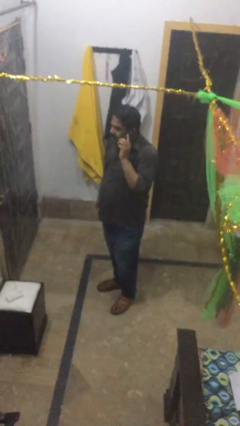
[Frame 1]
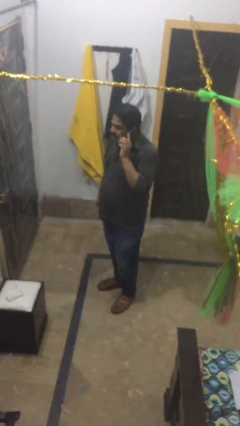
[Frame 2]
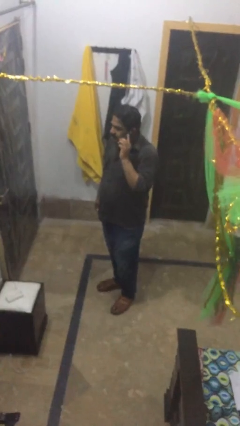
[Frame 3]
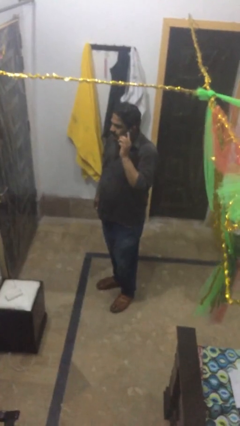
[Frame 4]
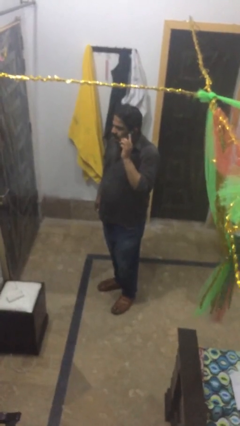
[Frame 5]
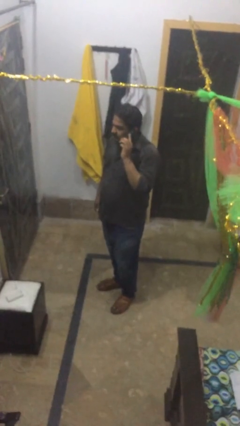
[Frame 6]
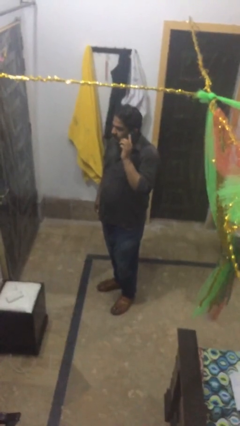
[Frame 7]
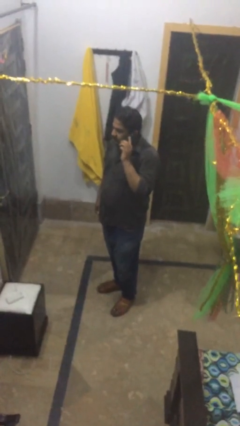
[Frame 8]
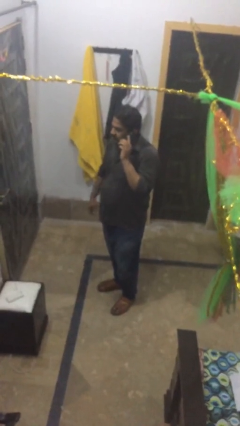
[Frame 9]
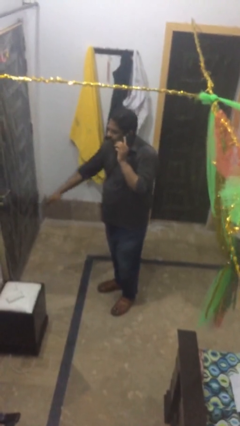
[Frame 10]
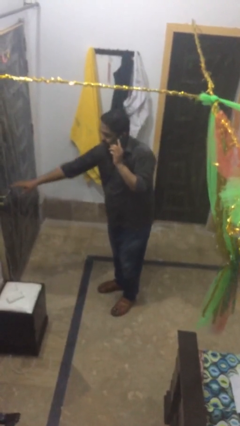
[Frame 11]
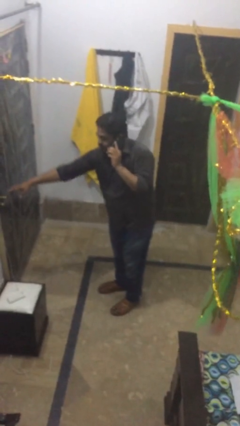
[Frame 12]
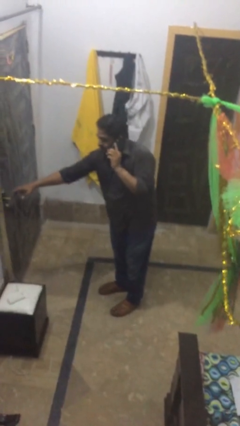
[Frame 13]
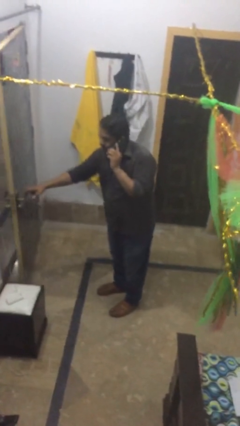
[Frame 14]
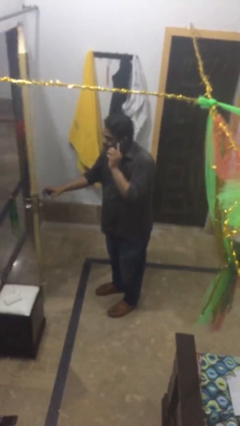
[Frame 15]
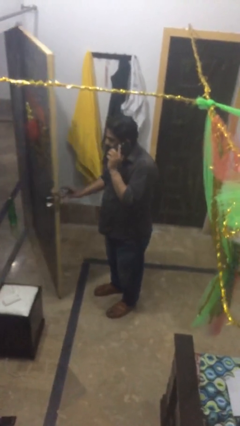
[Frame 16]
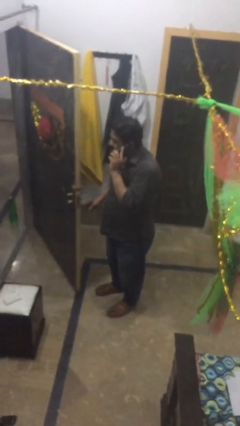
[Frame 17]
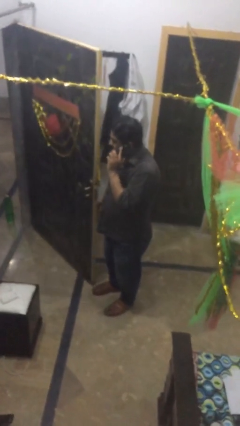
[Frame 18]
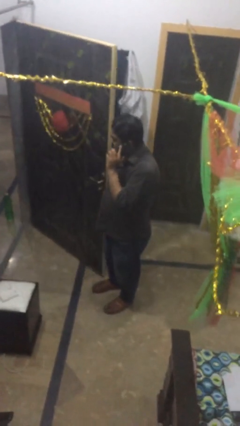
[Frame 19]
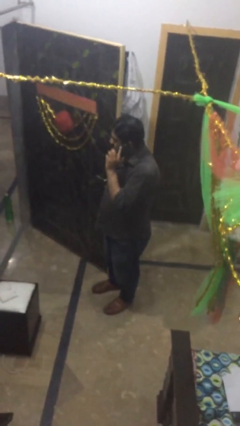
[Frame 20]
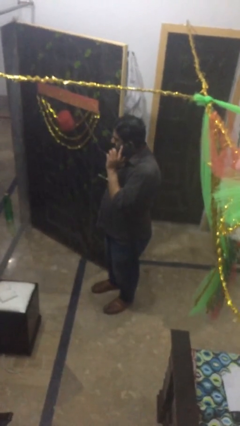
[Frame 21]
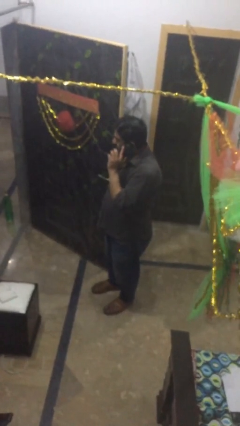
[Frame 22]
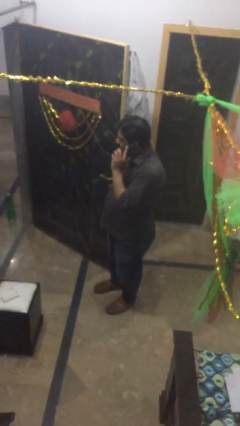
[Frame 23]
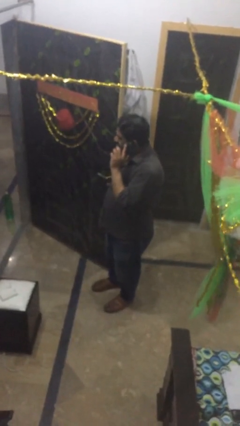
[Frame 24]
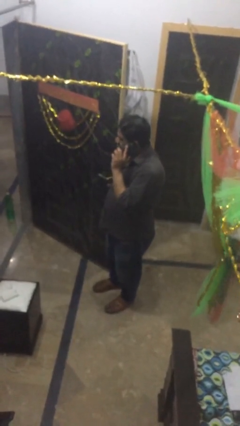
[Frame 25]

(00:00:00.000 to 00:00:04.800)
person opens facility door

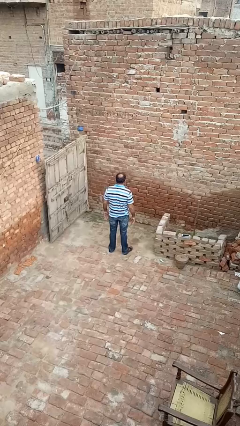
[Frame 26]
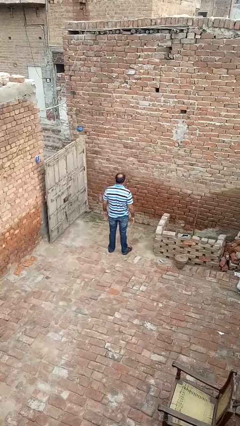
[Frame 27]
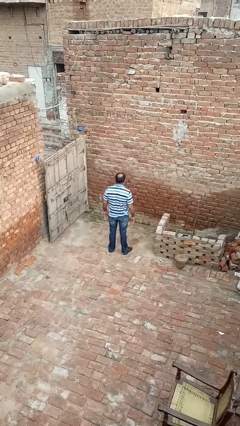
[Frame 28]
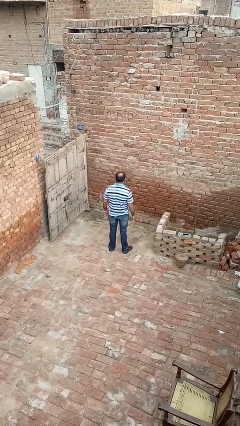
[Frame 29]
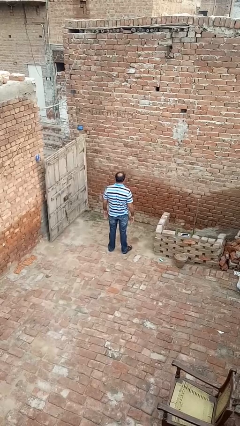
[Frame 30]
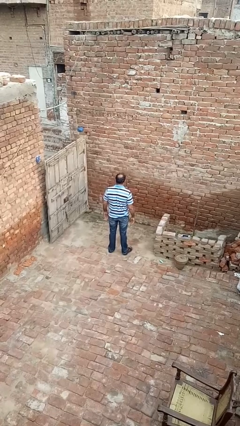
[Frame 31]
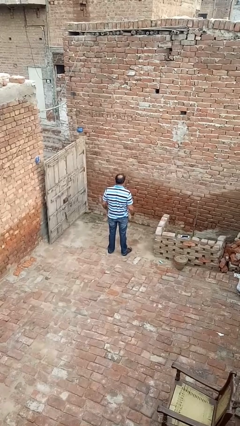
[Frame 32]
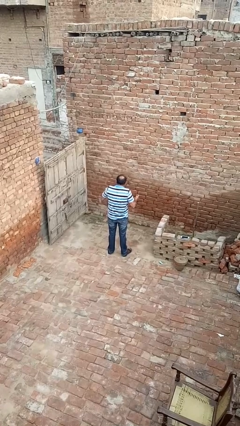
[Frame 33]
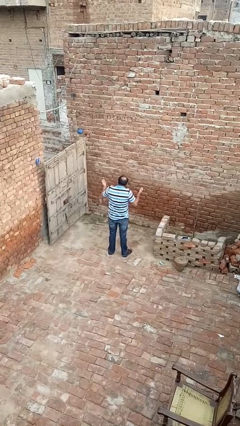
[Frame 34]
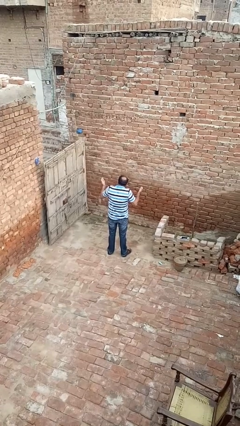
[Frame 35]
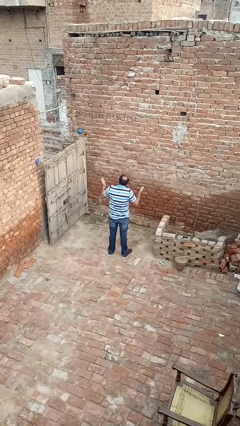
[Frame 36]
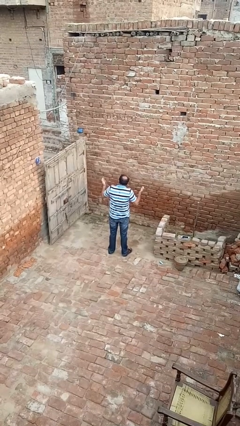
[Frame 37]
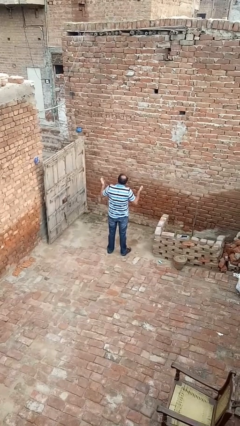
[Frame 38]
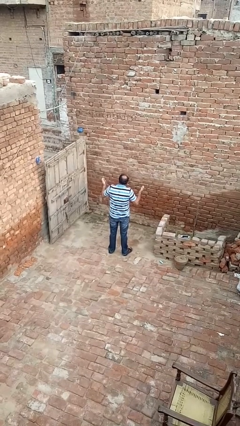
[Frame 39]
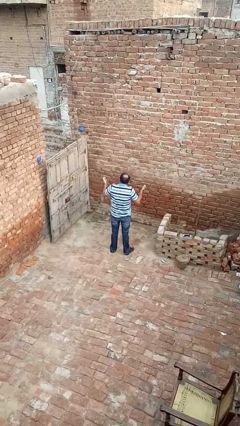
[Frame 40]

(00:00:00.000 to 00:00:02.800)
person shrugs

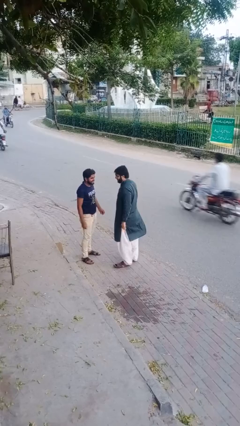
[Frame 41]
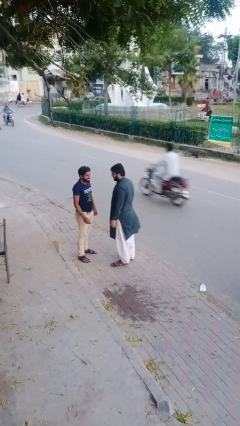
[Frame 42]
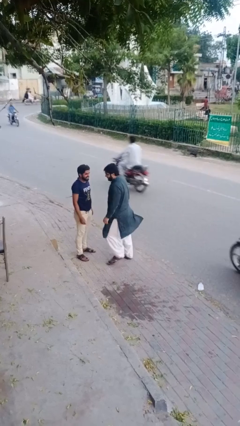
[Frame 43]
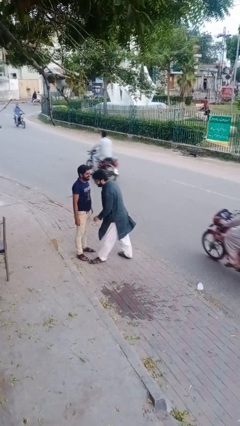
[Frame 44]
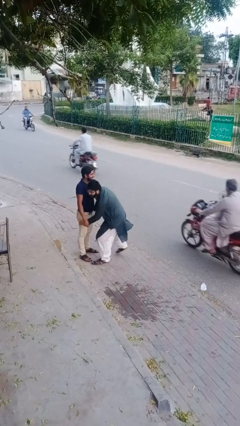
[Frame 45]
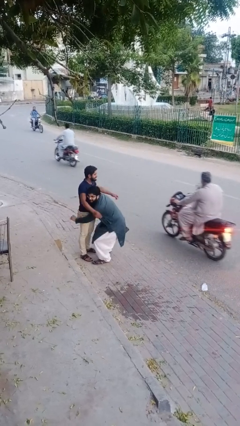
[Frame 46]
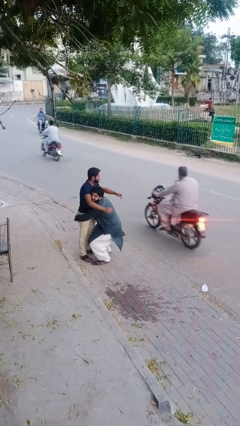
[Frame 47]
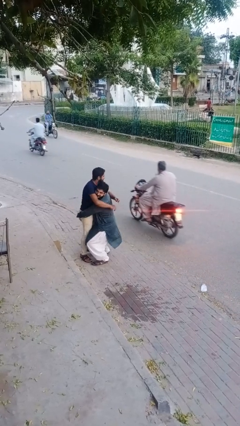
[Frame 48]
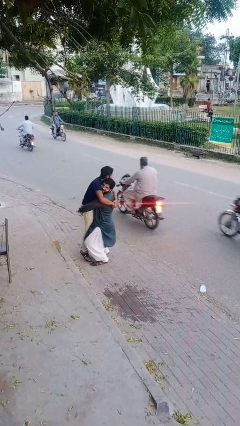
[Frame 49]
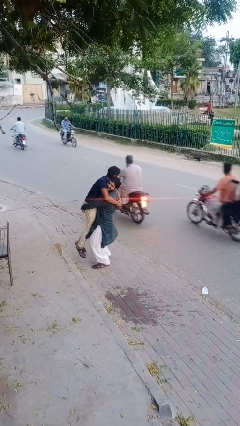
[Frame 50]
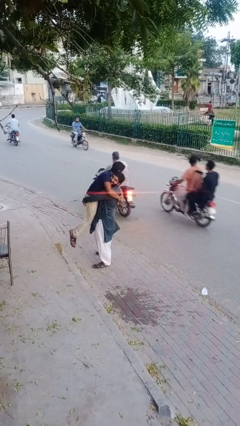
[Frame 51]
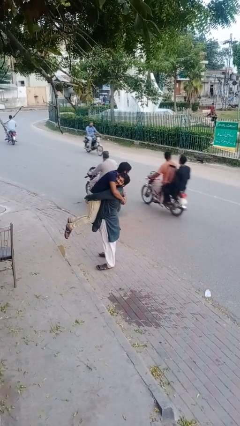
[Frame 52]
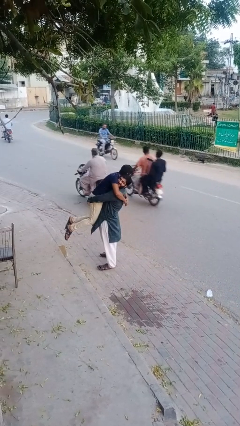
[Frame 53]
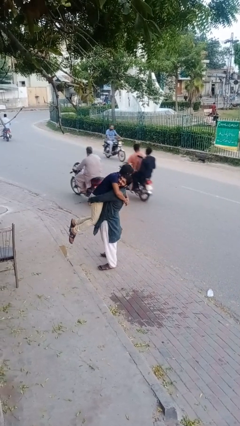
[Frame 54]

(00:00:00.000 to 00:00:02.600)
person picks up person

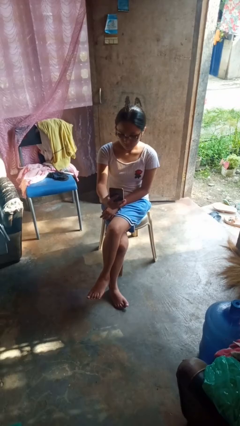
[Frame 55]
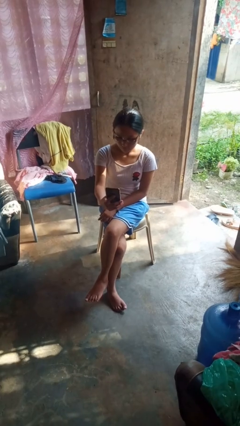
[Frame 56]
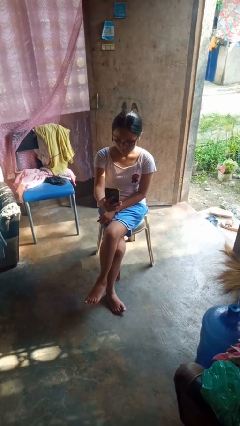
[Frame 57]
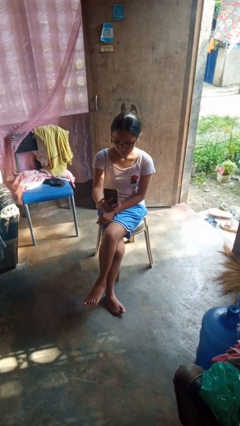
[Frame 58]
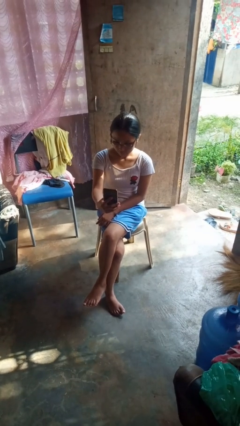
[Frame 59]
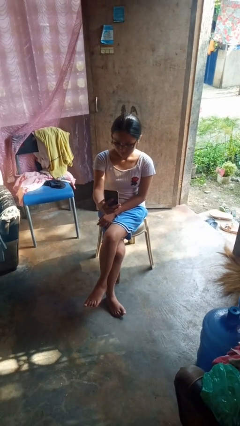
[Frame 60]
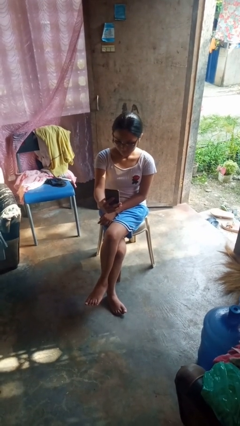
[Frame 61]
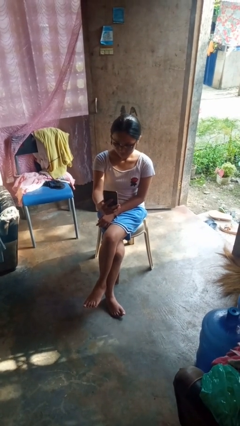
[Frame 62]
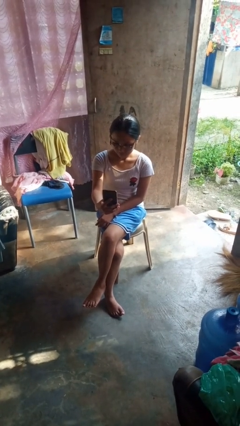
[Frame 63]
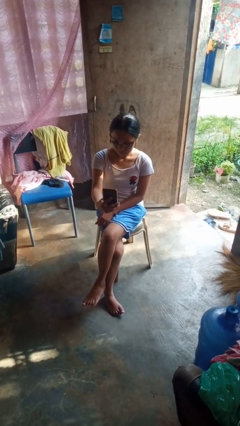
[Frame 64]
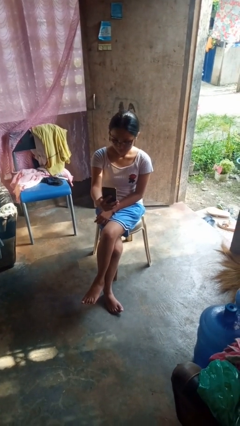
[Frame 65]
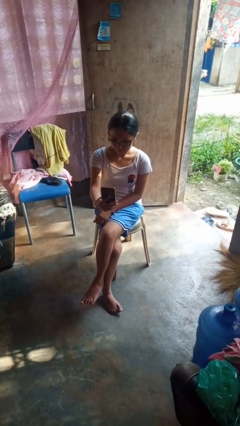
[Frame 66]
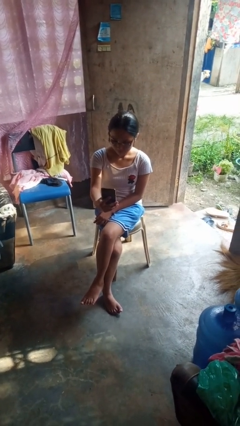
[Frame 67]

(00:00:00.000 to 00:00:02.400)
person takes selfie

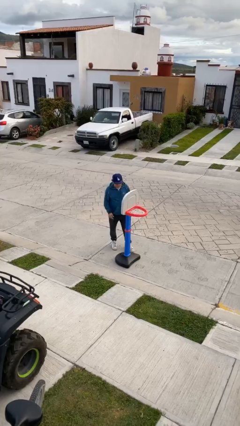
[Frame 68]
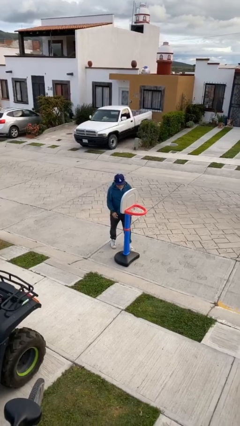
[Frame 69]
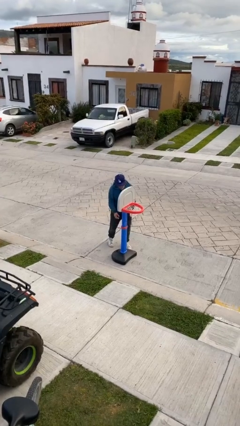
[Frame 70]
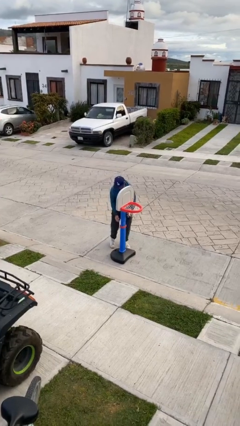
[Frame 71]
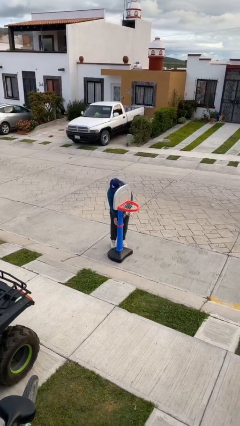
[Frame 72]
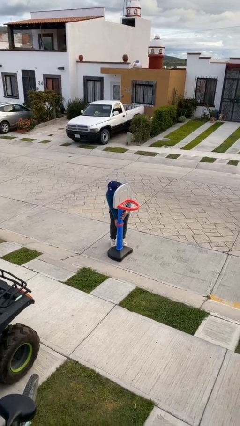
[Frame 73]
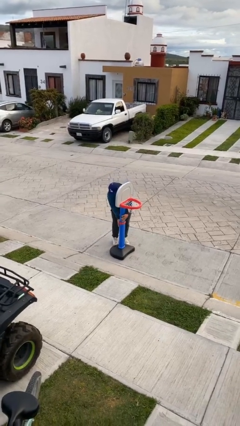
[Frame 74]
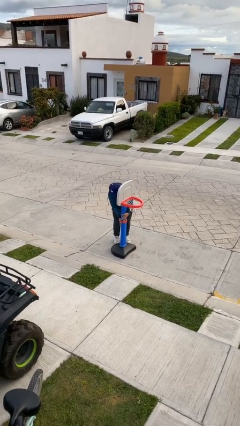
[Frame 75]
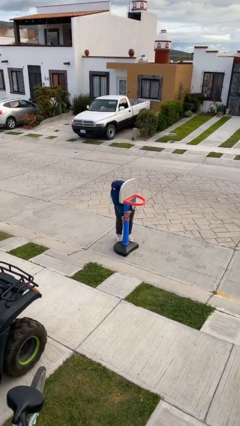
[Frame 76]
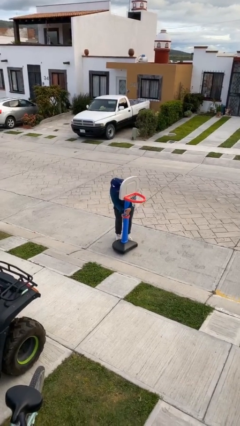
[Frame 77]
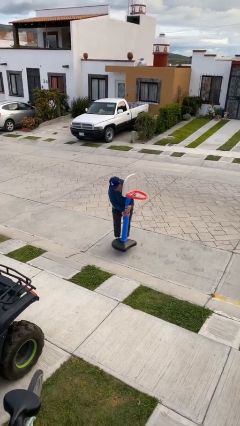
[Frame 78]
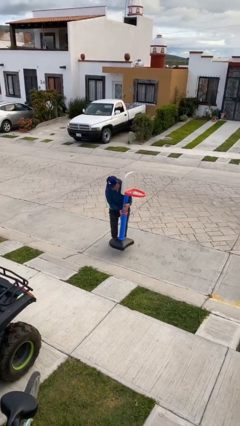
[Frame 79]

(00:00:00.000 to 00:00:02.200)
person picks up object from floor

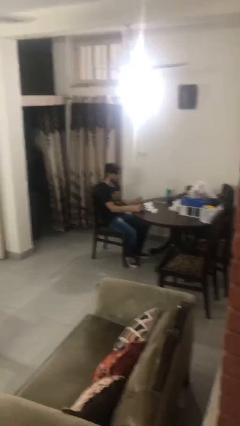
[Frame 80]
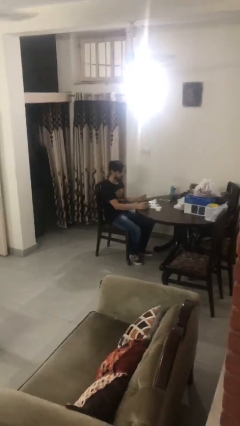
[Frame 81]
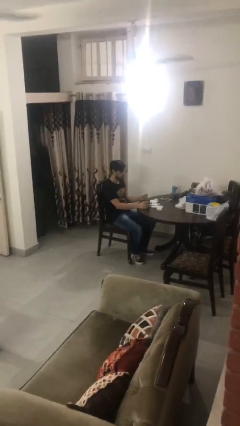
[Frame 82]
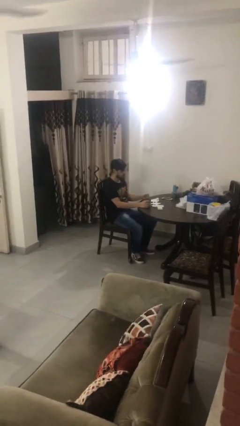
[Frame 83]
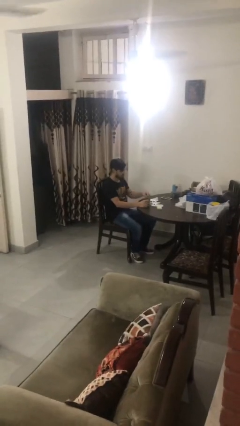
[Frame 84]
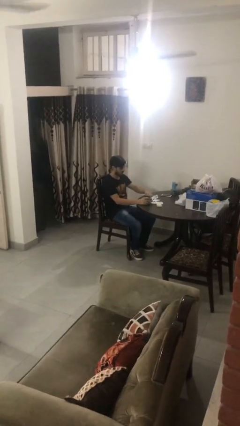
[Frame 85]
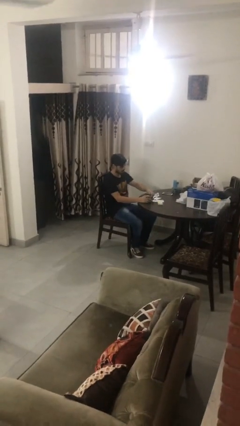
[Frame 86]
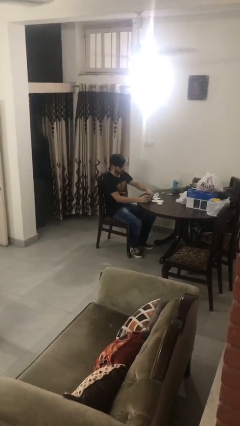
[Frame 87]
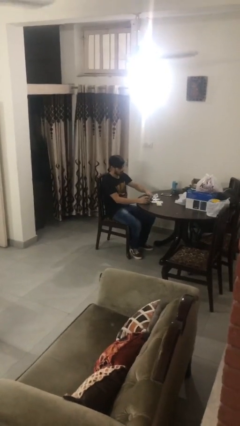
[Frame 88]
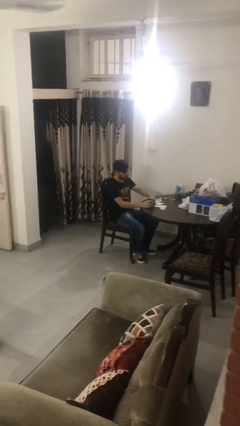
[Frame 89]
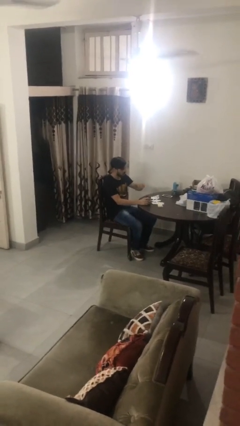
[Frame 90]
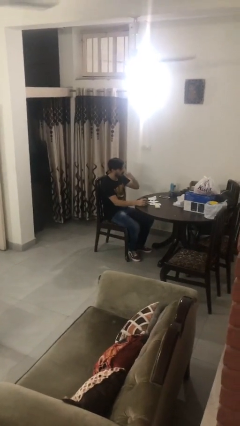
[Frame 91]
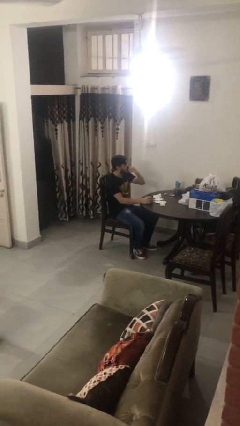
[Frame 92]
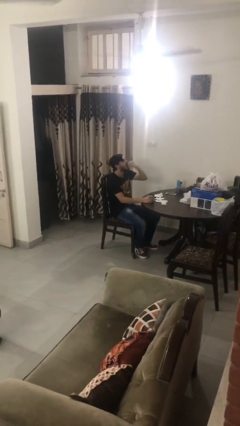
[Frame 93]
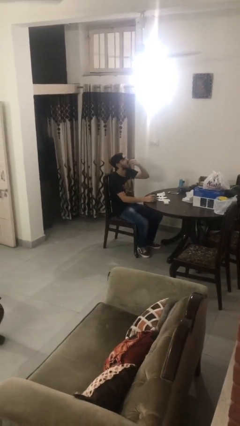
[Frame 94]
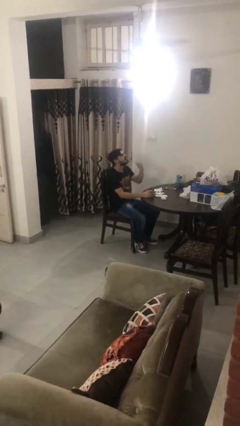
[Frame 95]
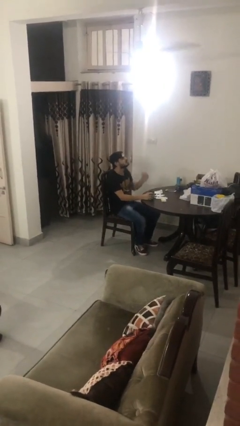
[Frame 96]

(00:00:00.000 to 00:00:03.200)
person takes medicine pills
